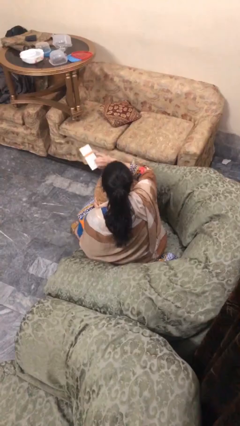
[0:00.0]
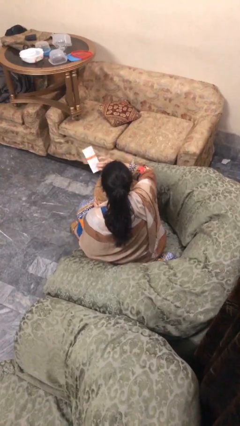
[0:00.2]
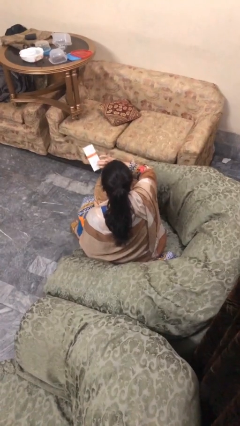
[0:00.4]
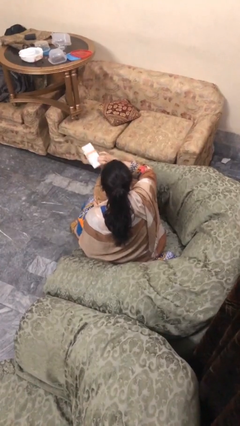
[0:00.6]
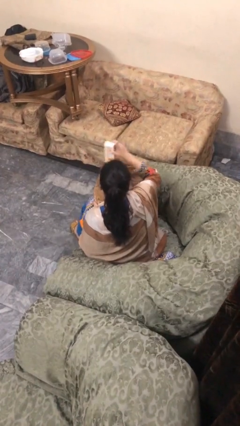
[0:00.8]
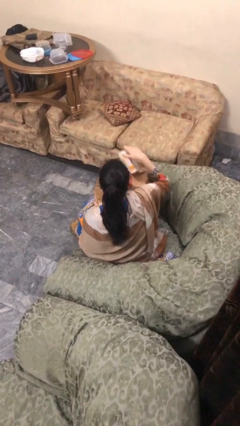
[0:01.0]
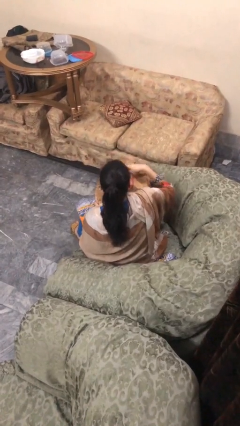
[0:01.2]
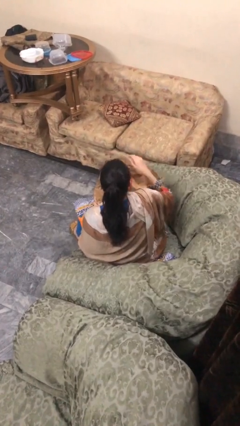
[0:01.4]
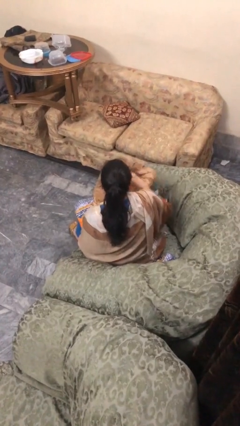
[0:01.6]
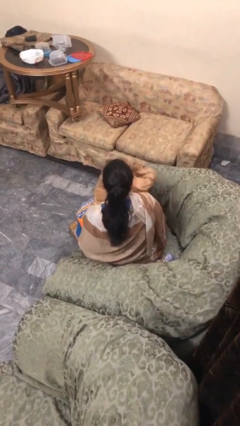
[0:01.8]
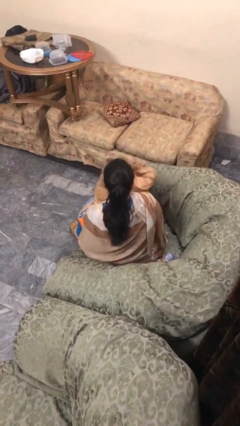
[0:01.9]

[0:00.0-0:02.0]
person puts object into bag

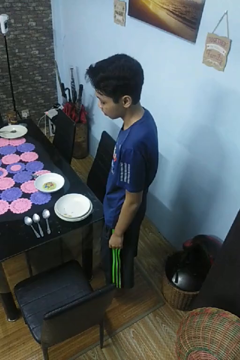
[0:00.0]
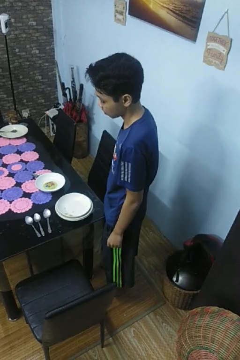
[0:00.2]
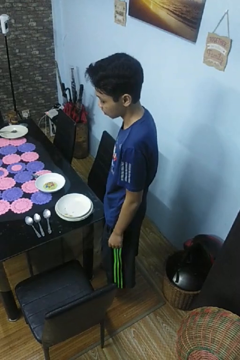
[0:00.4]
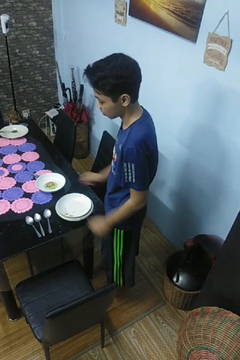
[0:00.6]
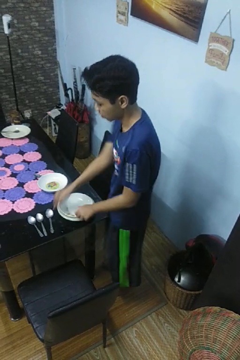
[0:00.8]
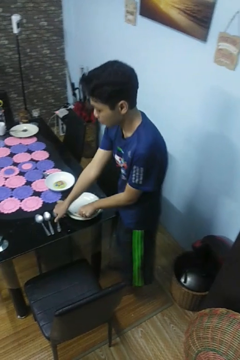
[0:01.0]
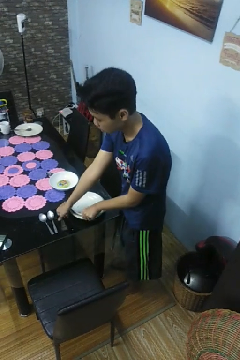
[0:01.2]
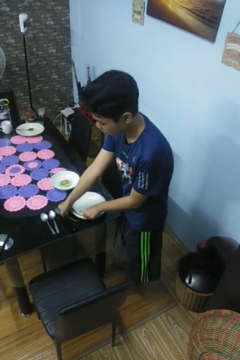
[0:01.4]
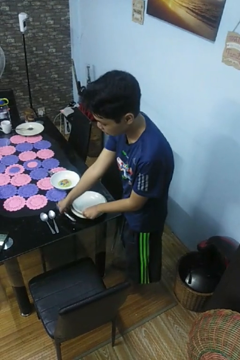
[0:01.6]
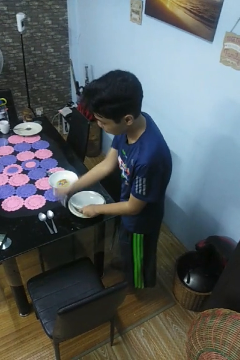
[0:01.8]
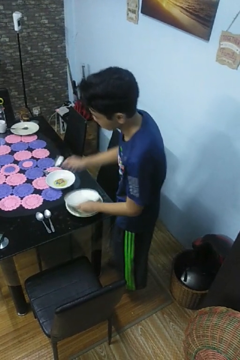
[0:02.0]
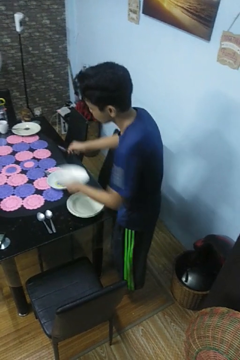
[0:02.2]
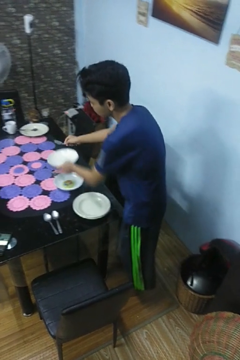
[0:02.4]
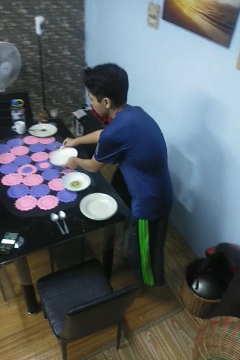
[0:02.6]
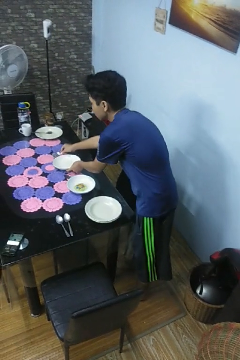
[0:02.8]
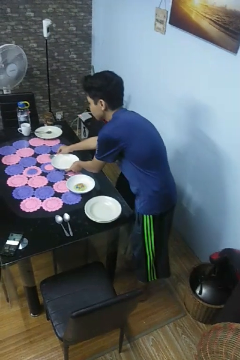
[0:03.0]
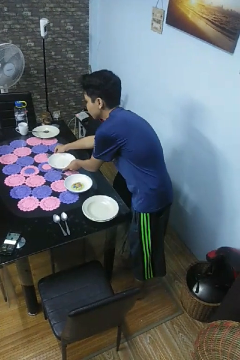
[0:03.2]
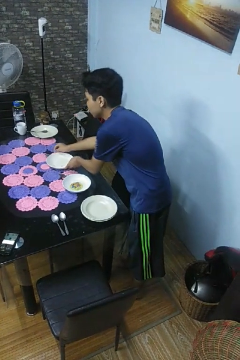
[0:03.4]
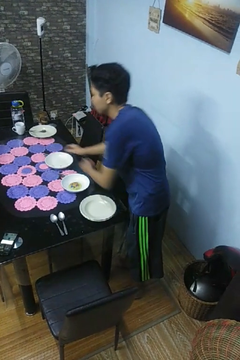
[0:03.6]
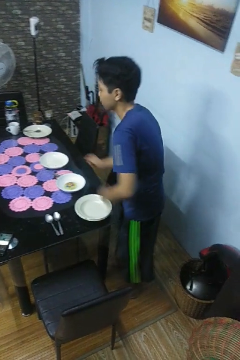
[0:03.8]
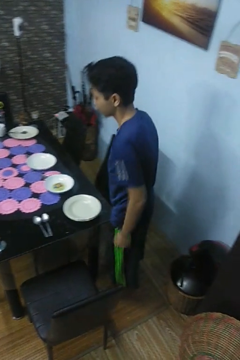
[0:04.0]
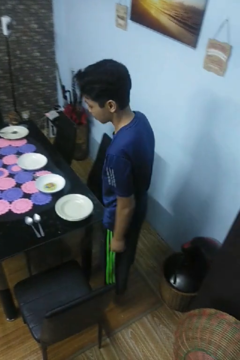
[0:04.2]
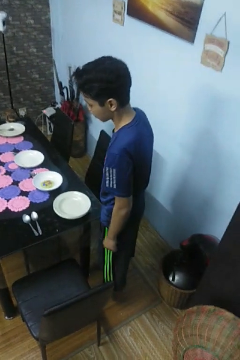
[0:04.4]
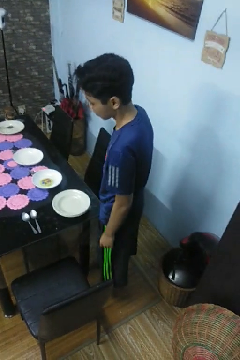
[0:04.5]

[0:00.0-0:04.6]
person sets table

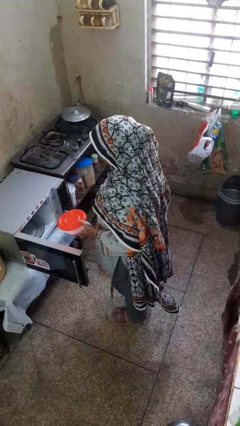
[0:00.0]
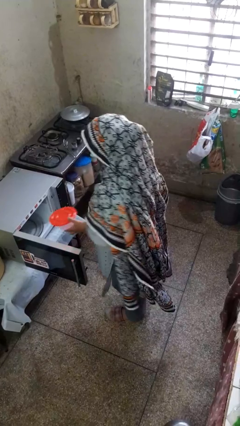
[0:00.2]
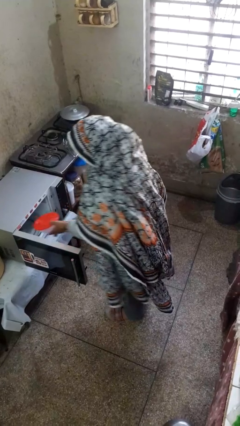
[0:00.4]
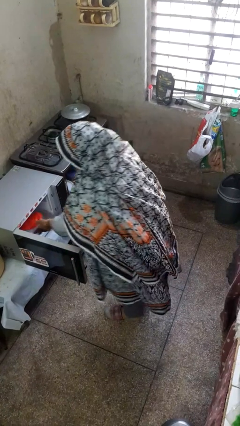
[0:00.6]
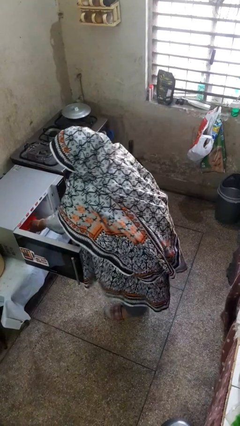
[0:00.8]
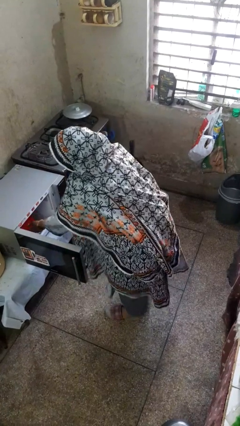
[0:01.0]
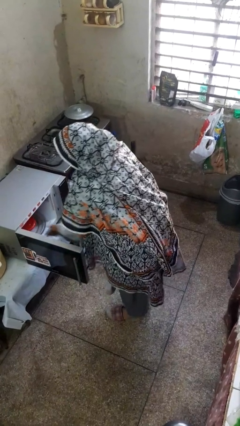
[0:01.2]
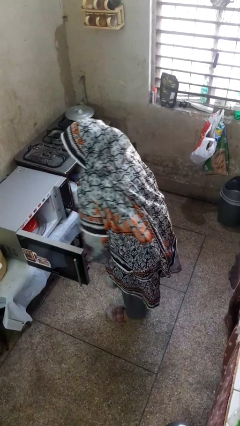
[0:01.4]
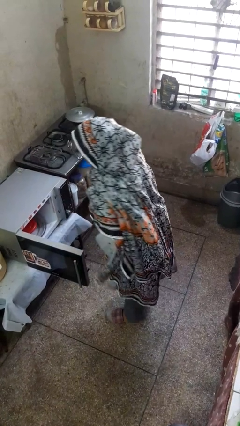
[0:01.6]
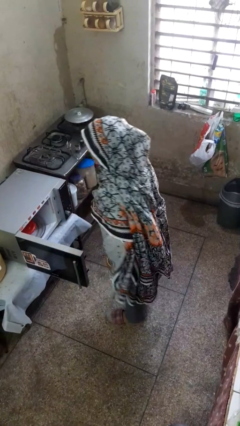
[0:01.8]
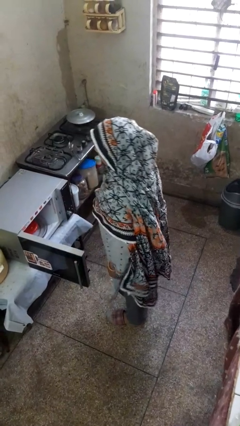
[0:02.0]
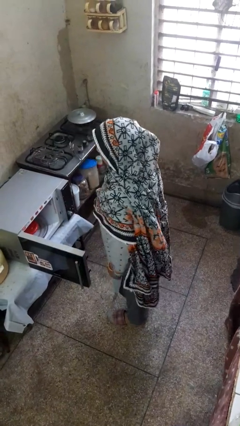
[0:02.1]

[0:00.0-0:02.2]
person puts object into microwave

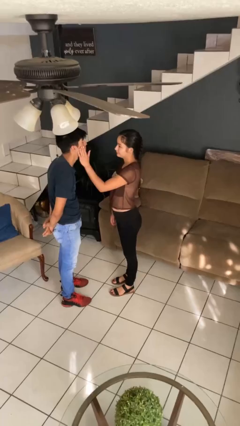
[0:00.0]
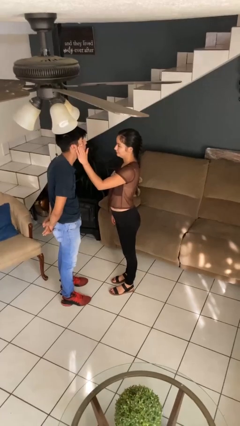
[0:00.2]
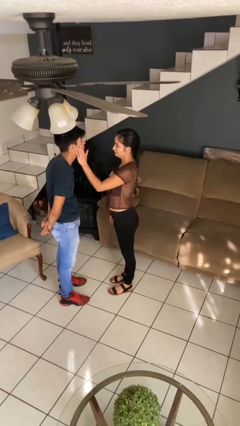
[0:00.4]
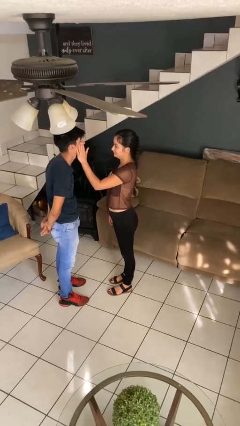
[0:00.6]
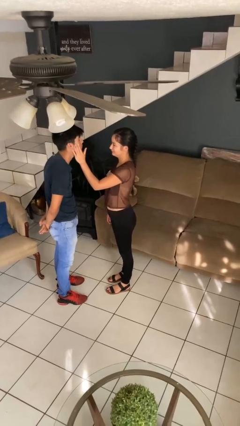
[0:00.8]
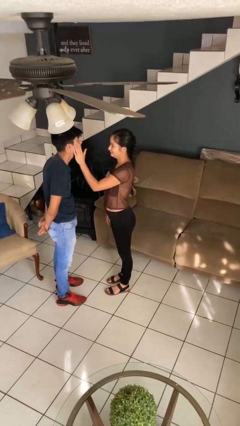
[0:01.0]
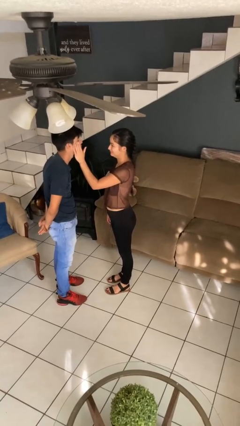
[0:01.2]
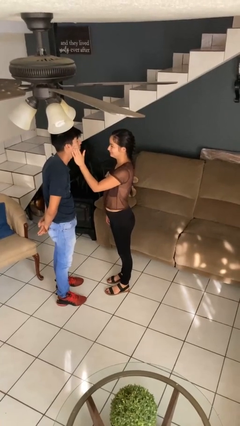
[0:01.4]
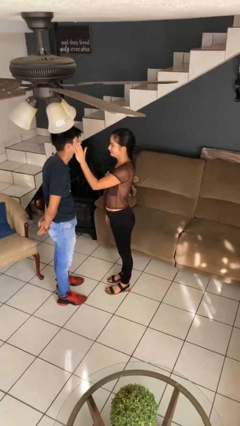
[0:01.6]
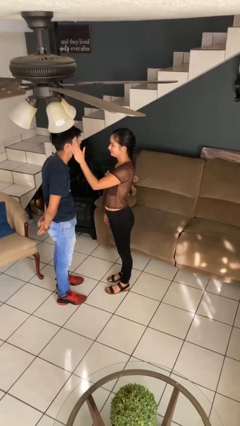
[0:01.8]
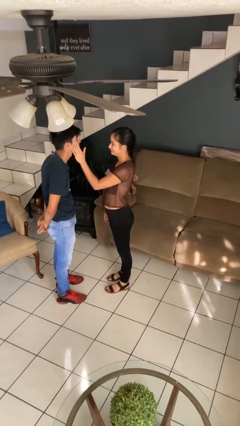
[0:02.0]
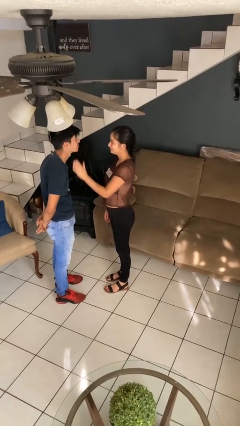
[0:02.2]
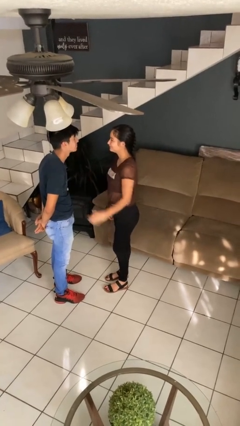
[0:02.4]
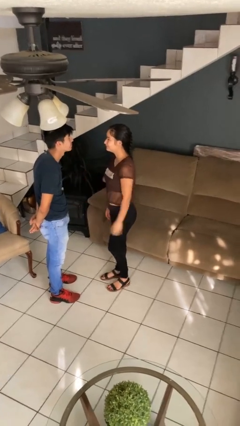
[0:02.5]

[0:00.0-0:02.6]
person touches face of person

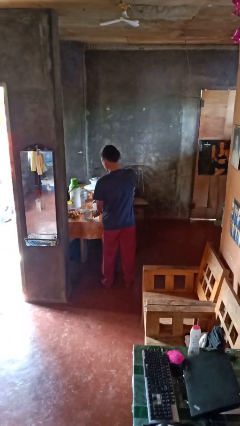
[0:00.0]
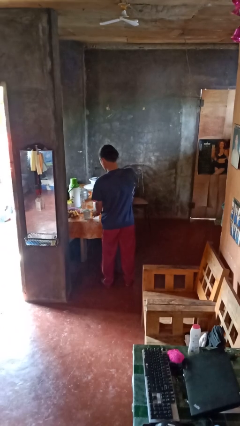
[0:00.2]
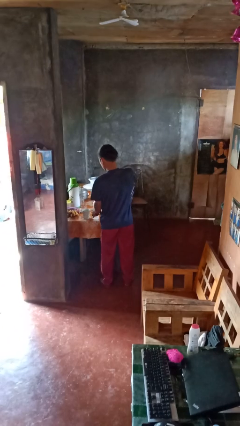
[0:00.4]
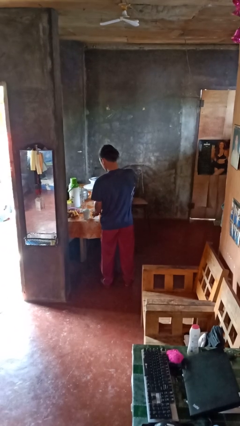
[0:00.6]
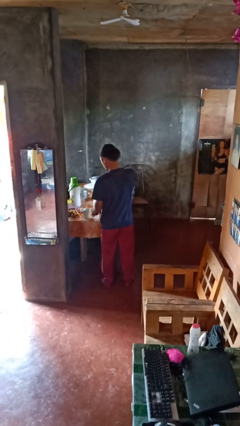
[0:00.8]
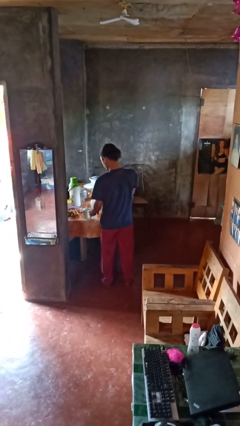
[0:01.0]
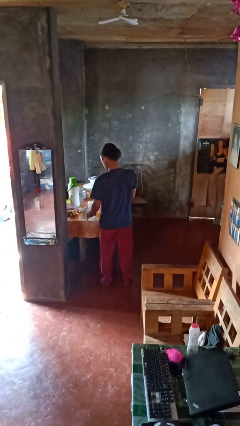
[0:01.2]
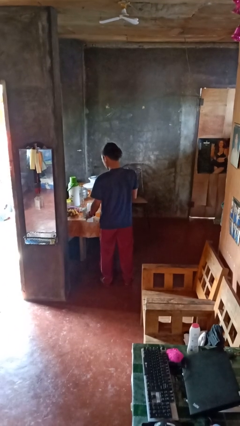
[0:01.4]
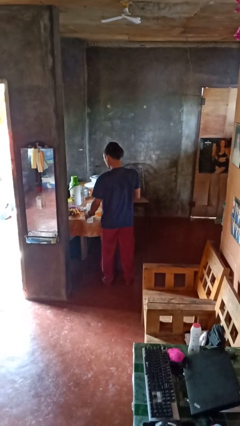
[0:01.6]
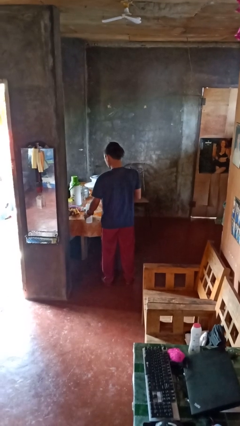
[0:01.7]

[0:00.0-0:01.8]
person unscrews lid from bottle

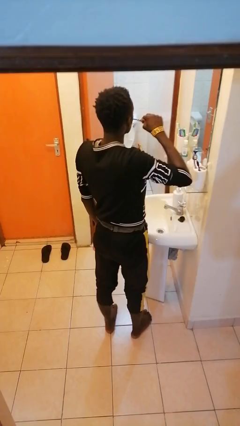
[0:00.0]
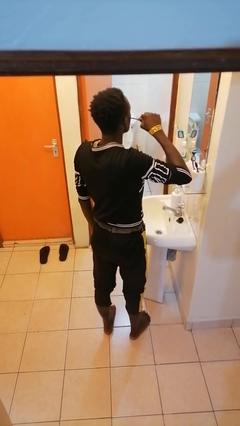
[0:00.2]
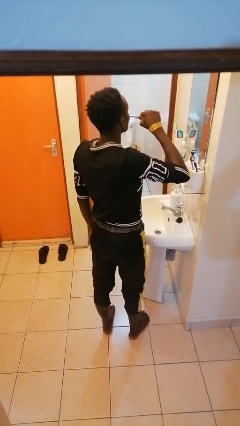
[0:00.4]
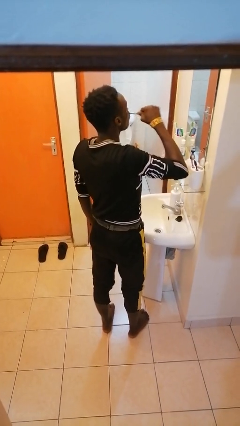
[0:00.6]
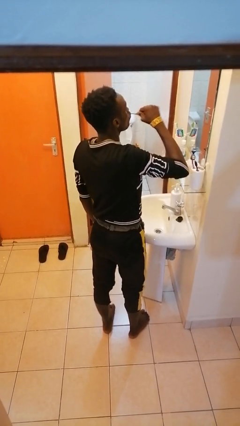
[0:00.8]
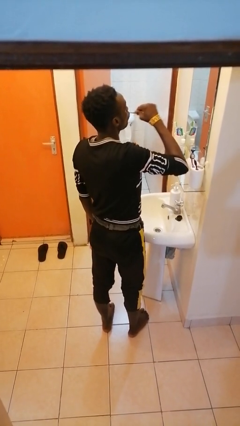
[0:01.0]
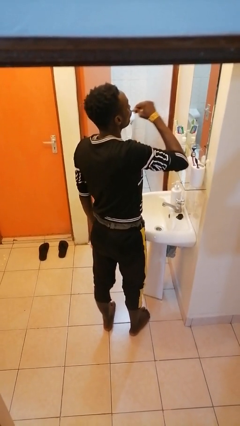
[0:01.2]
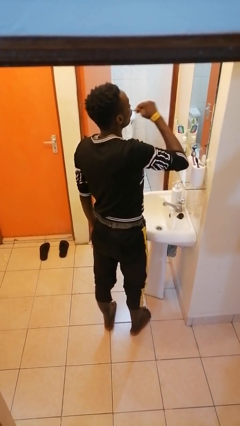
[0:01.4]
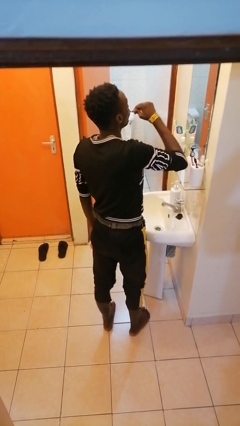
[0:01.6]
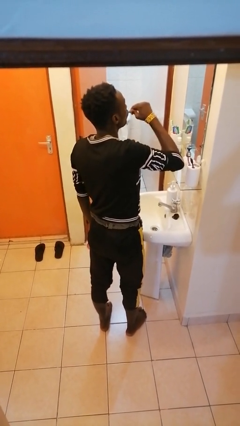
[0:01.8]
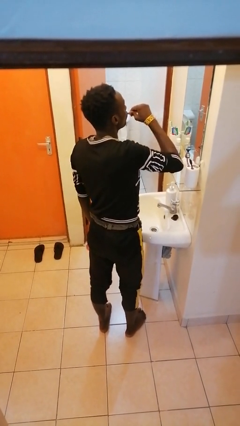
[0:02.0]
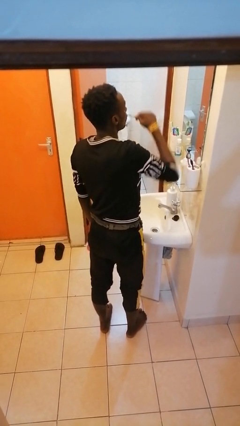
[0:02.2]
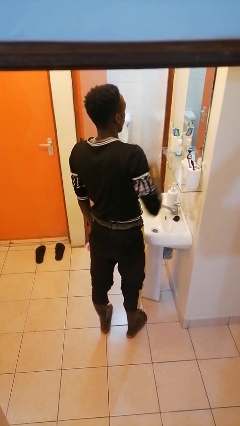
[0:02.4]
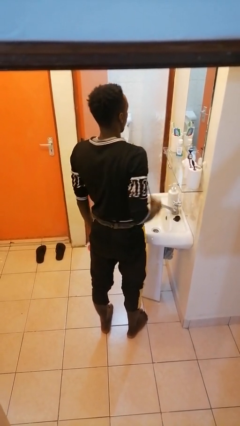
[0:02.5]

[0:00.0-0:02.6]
person brushes teeth

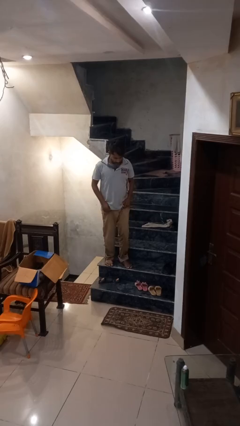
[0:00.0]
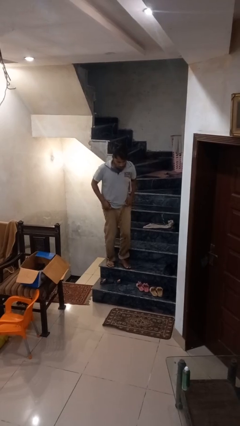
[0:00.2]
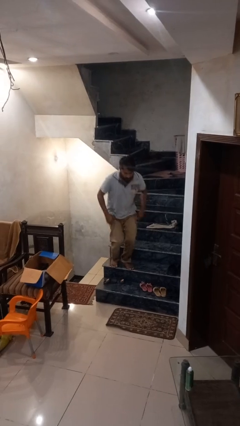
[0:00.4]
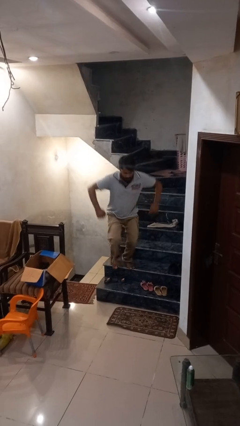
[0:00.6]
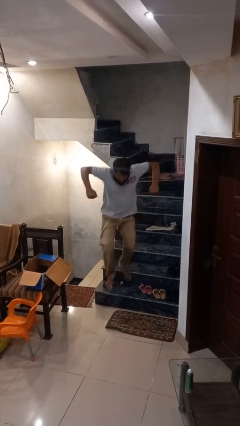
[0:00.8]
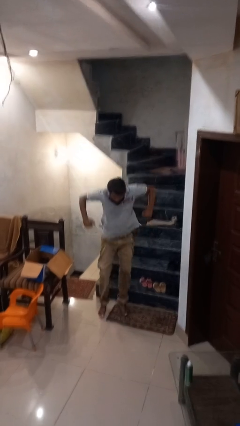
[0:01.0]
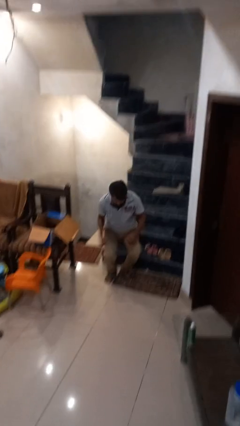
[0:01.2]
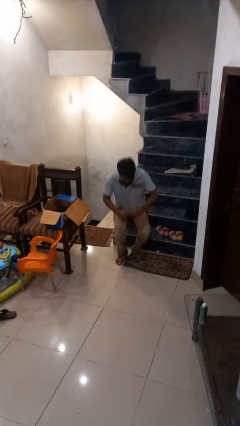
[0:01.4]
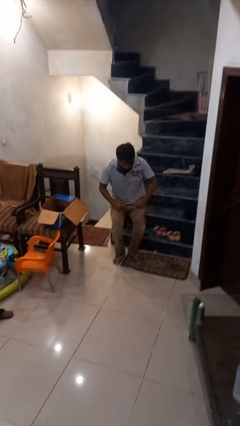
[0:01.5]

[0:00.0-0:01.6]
person climbs down stairs

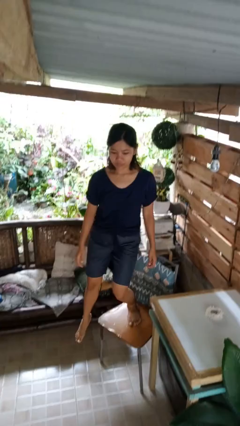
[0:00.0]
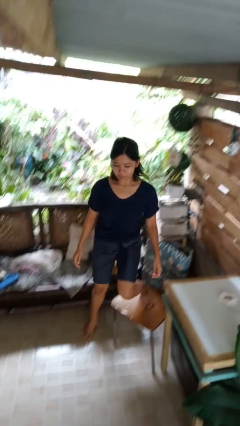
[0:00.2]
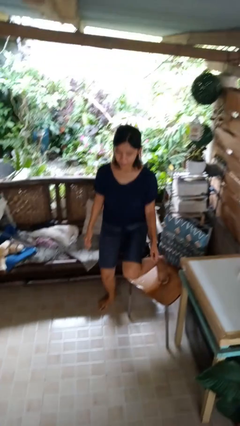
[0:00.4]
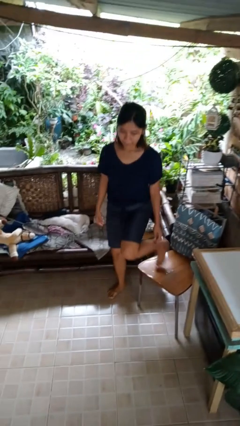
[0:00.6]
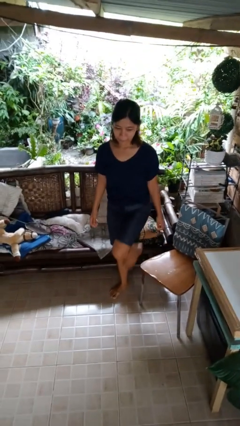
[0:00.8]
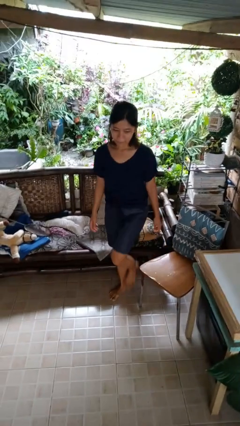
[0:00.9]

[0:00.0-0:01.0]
person climbs off chair
